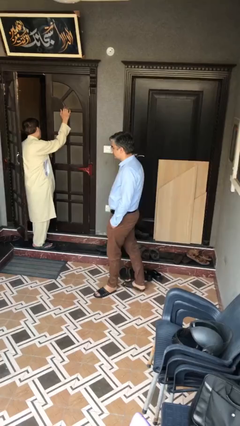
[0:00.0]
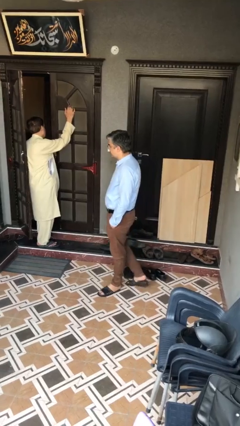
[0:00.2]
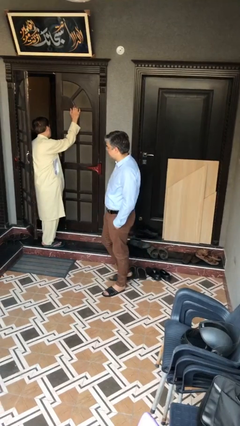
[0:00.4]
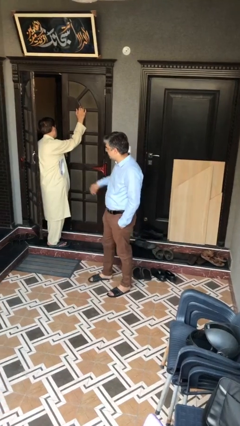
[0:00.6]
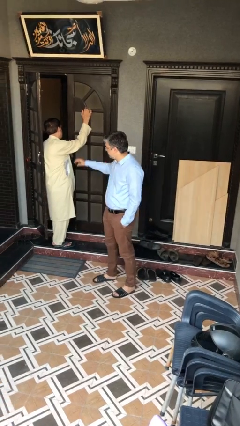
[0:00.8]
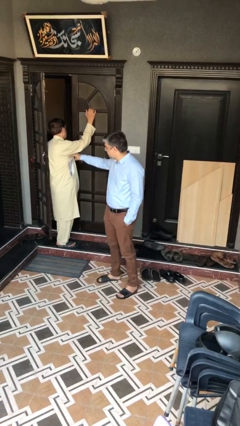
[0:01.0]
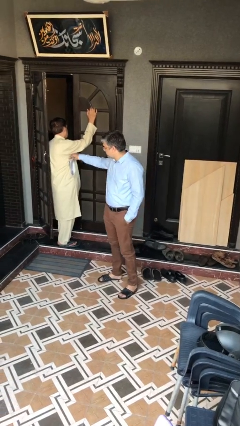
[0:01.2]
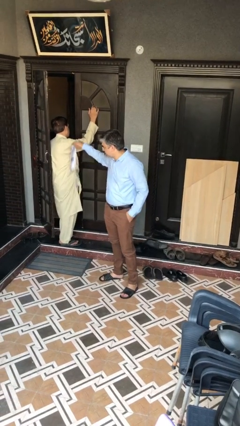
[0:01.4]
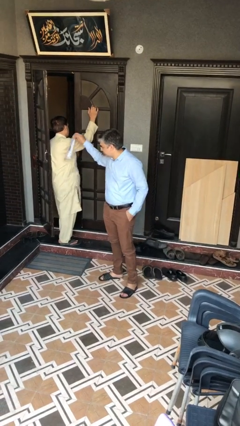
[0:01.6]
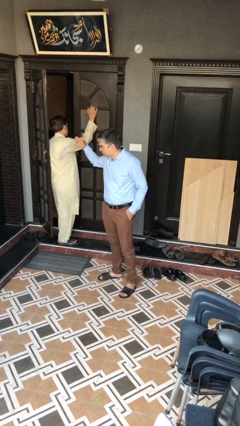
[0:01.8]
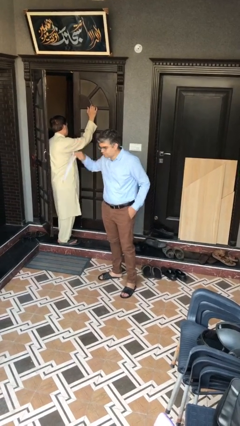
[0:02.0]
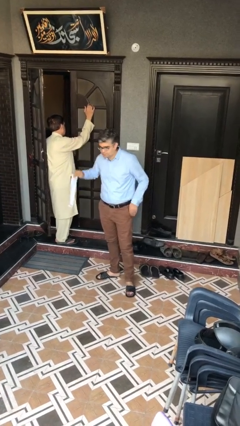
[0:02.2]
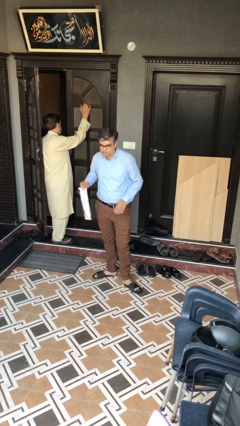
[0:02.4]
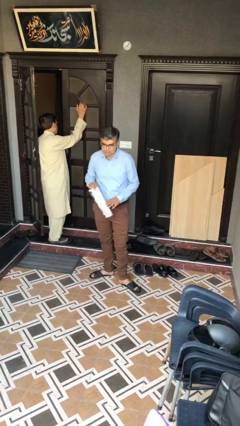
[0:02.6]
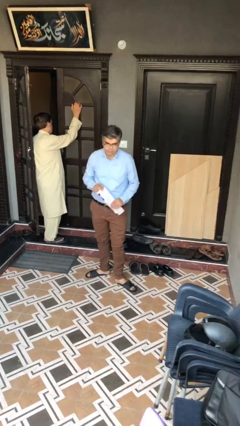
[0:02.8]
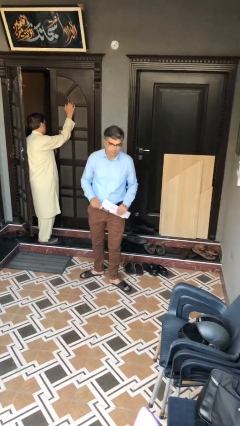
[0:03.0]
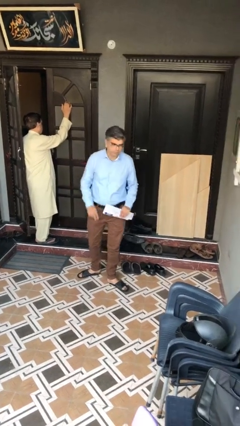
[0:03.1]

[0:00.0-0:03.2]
person steals object from person

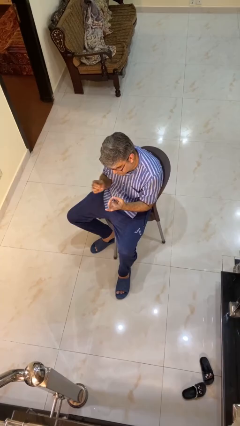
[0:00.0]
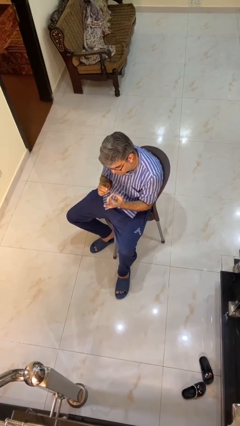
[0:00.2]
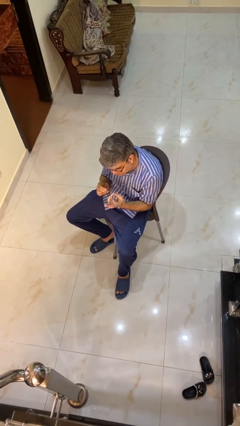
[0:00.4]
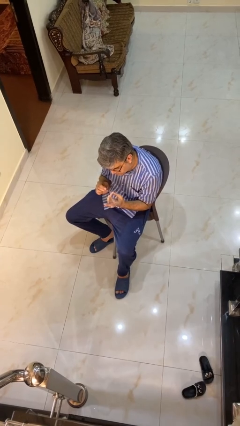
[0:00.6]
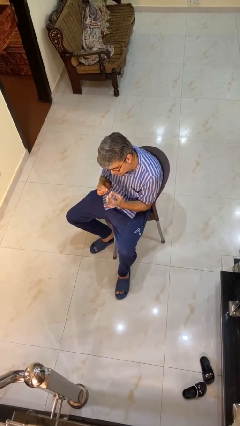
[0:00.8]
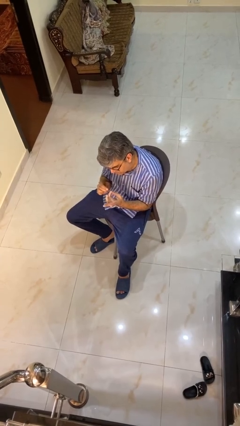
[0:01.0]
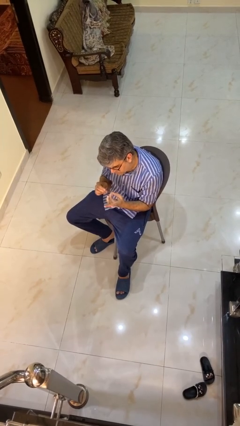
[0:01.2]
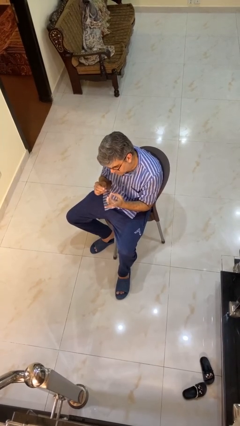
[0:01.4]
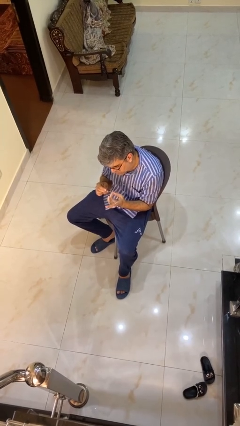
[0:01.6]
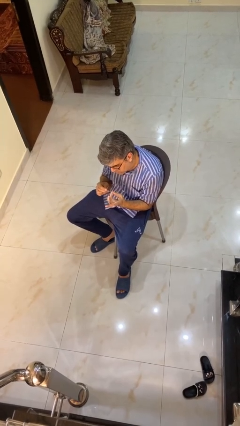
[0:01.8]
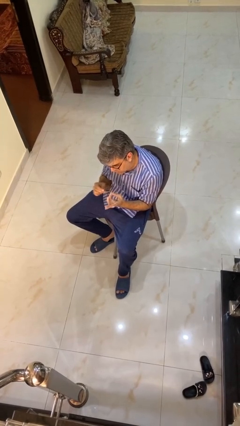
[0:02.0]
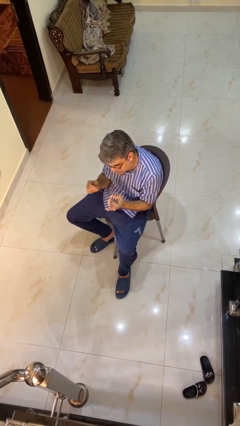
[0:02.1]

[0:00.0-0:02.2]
person files fingernails

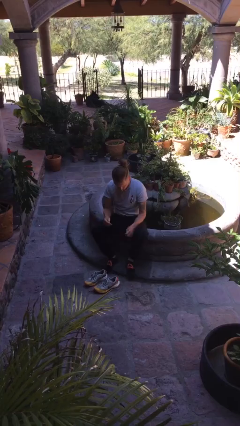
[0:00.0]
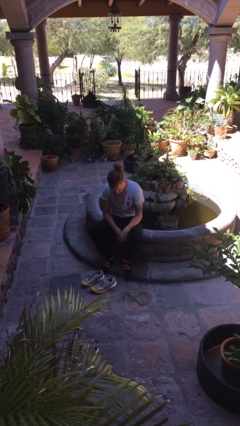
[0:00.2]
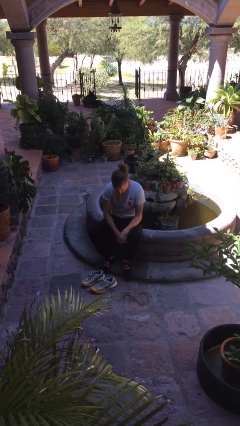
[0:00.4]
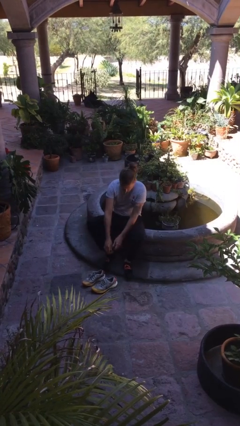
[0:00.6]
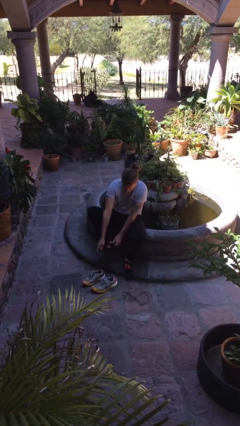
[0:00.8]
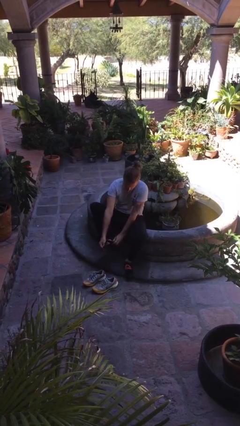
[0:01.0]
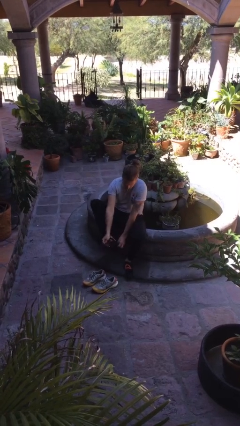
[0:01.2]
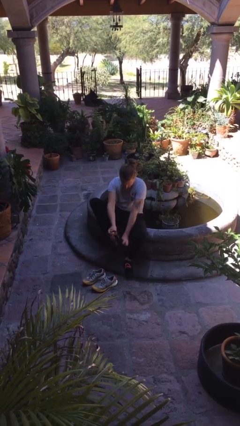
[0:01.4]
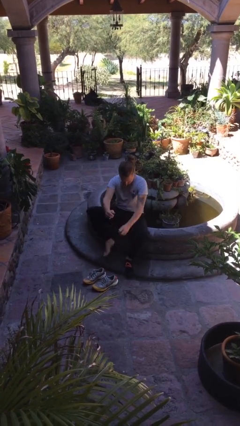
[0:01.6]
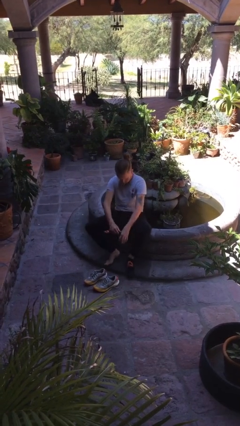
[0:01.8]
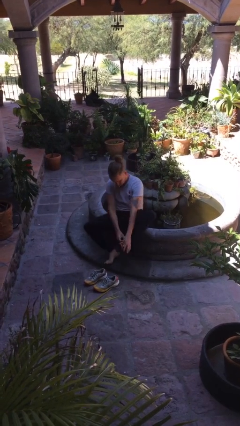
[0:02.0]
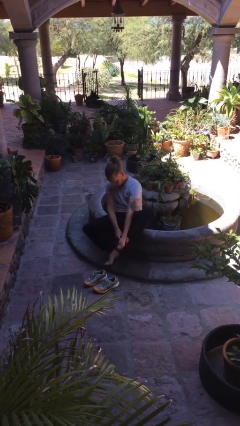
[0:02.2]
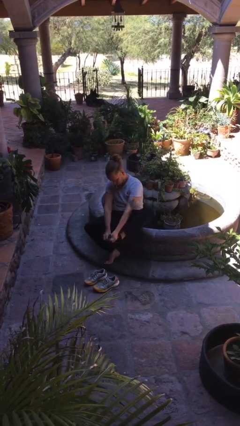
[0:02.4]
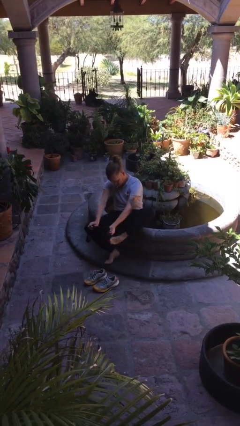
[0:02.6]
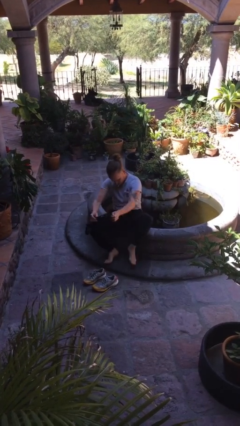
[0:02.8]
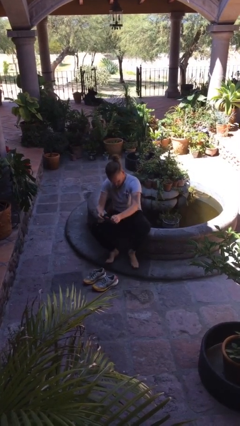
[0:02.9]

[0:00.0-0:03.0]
person takes off socks

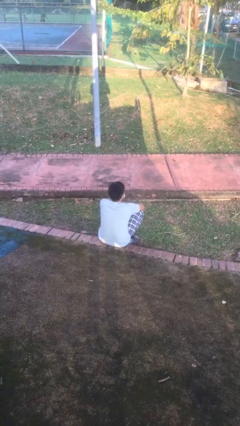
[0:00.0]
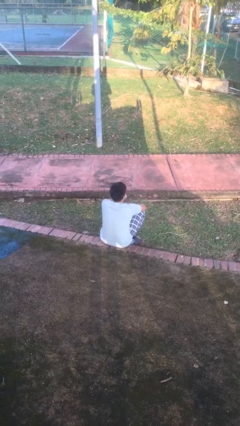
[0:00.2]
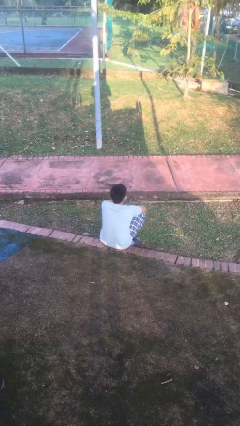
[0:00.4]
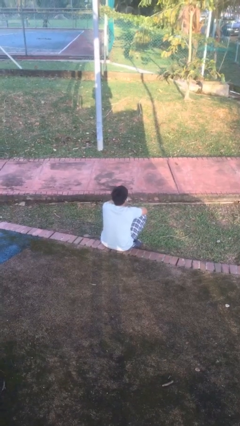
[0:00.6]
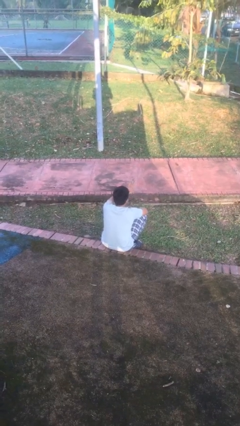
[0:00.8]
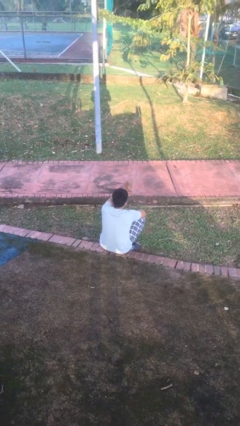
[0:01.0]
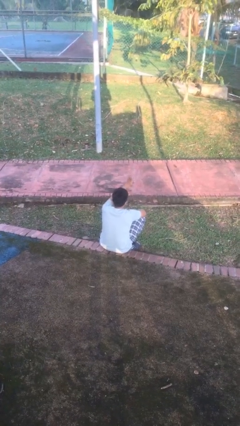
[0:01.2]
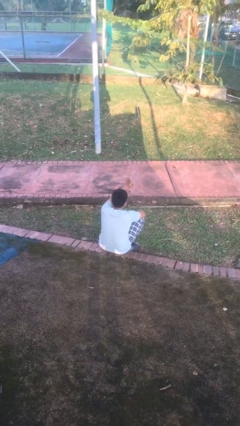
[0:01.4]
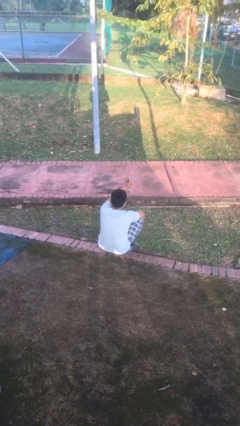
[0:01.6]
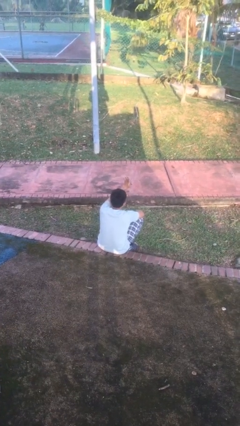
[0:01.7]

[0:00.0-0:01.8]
person gestures stop

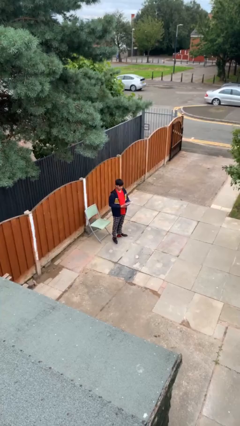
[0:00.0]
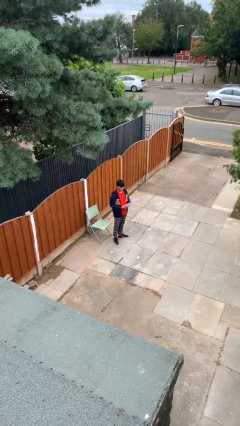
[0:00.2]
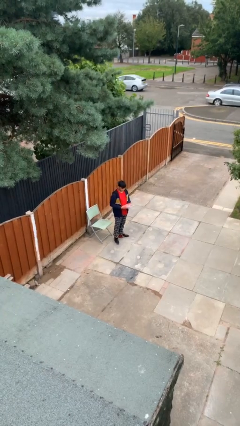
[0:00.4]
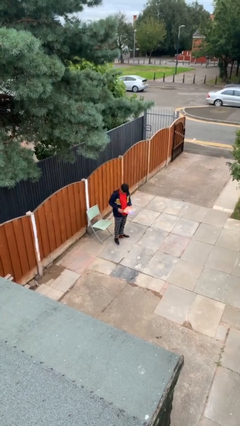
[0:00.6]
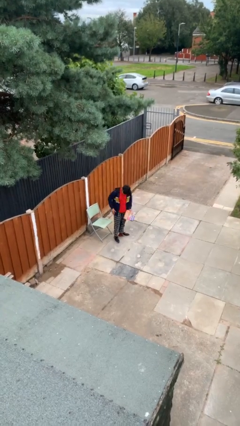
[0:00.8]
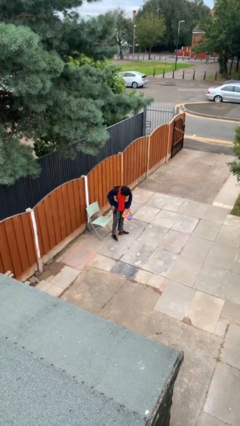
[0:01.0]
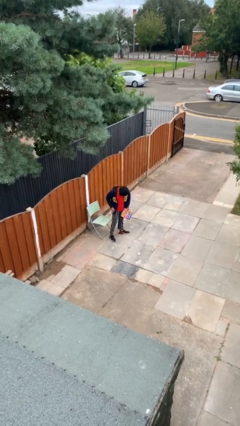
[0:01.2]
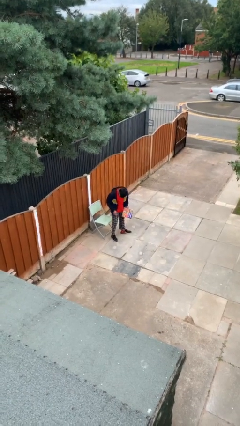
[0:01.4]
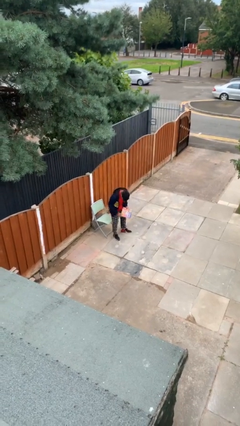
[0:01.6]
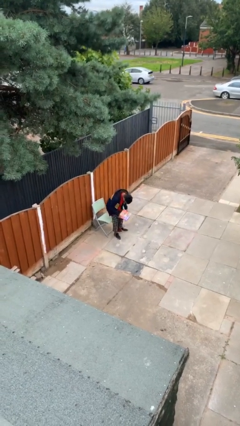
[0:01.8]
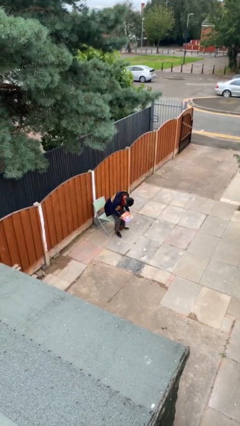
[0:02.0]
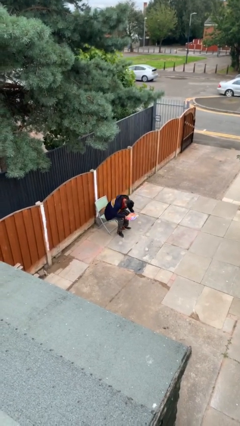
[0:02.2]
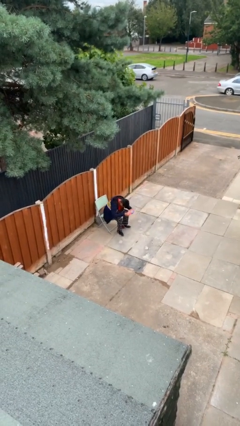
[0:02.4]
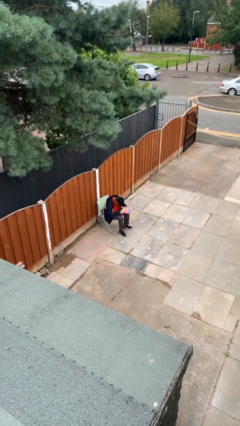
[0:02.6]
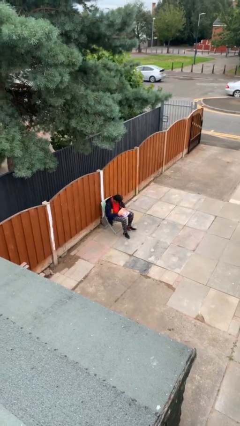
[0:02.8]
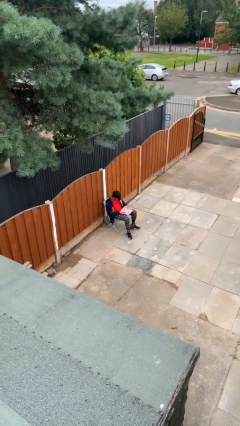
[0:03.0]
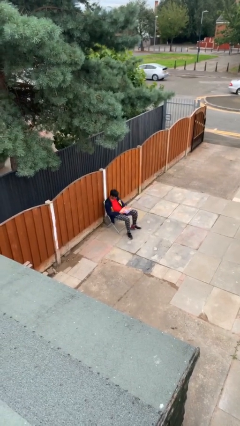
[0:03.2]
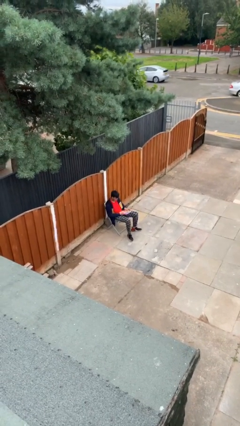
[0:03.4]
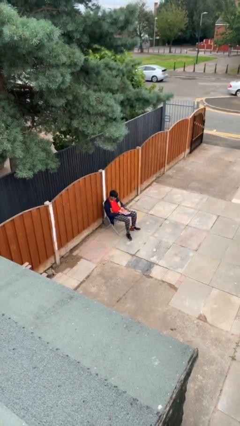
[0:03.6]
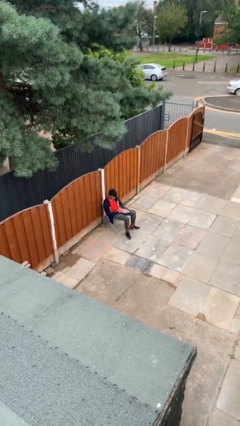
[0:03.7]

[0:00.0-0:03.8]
person sits down

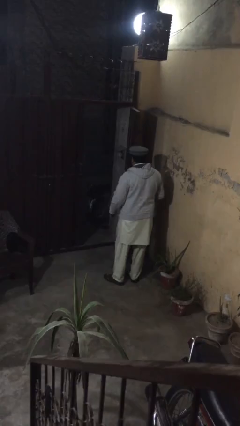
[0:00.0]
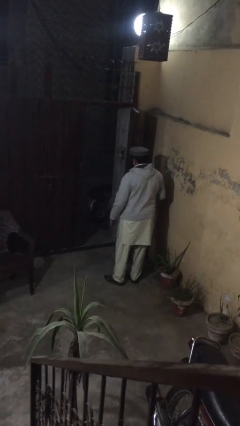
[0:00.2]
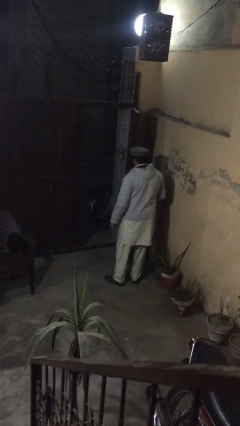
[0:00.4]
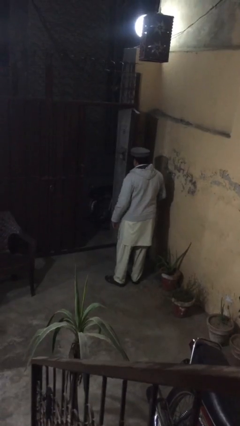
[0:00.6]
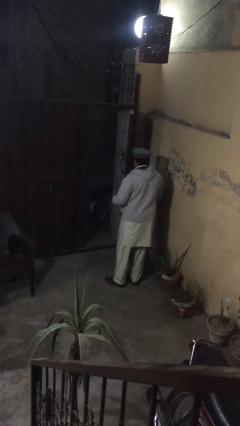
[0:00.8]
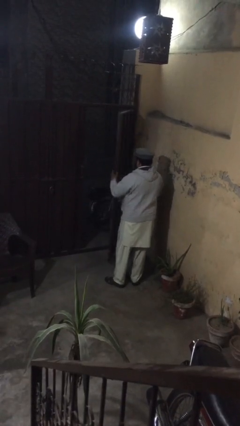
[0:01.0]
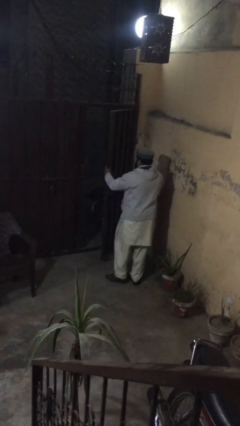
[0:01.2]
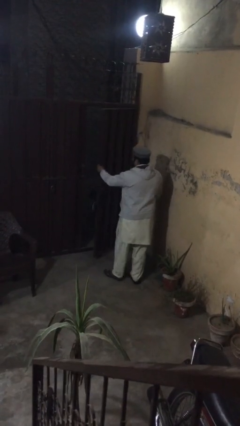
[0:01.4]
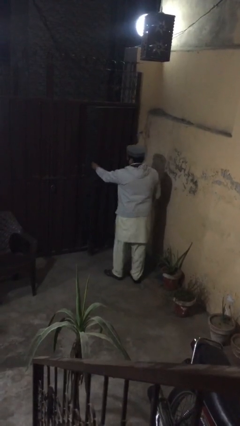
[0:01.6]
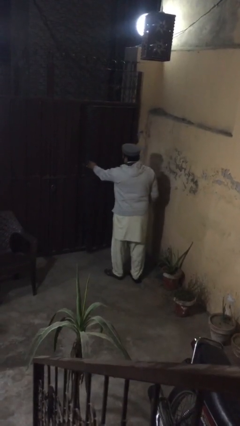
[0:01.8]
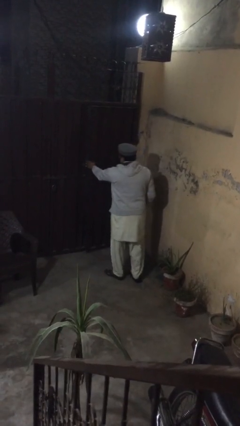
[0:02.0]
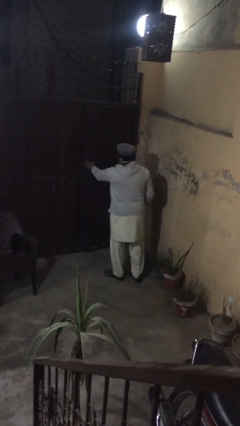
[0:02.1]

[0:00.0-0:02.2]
person closes facility door

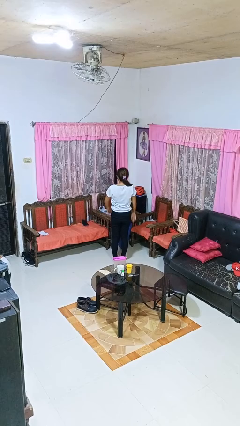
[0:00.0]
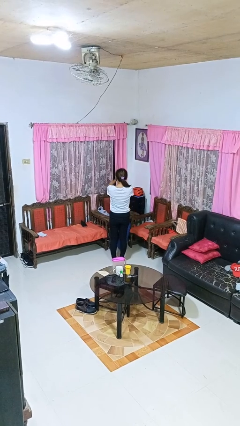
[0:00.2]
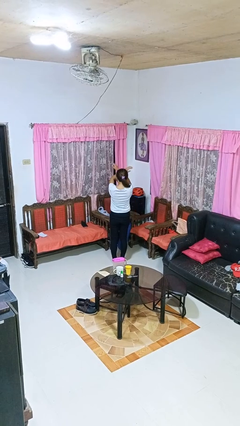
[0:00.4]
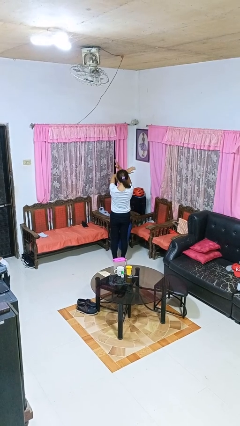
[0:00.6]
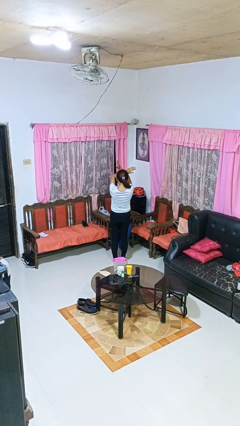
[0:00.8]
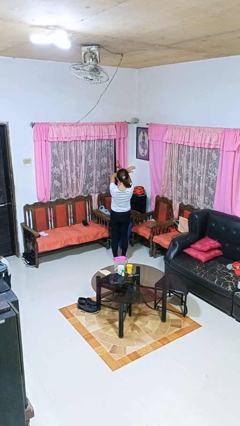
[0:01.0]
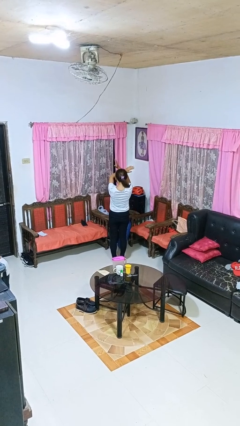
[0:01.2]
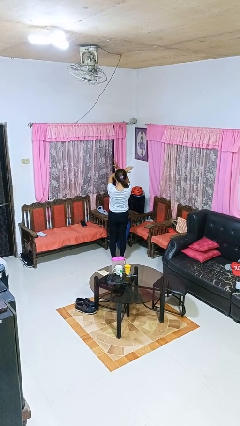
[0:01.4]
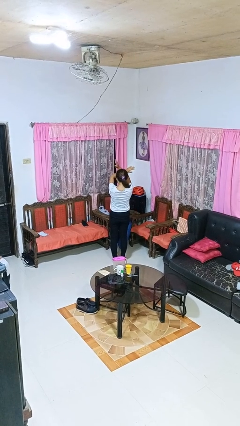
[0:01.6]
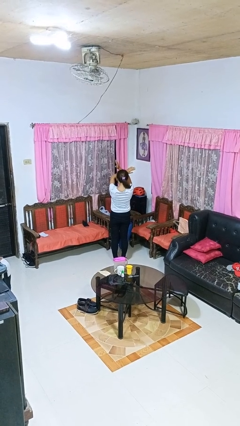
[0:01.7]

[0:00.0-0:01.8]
person gestures arms x
